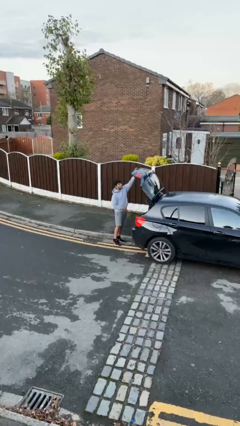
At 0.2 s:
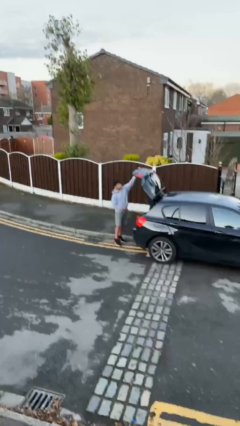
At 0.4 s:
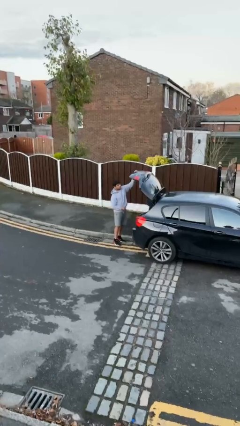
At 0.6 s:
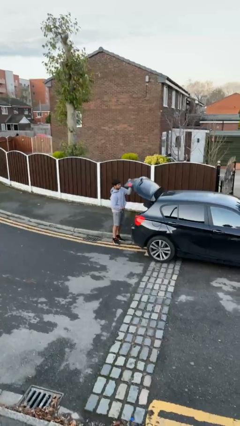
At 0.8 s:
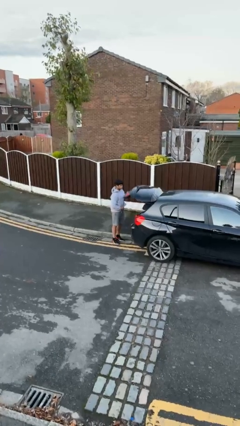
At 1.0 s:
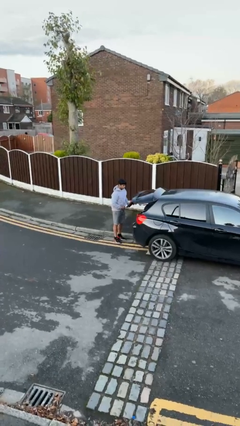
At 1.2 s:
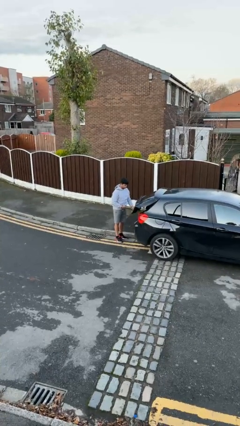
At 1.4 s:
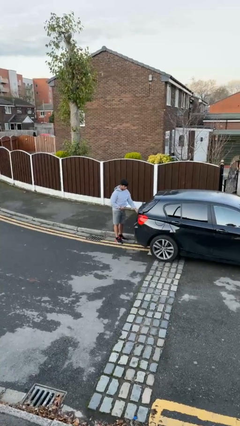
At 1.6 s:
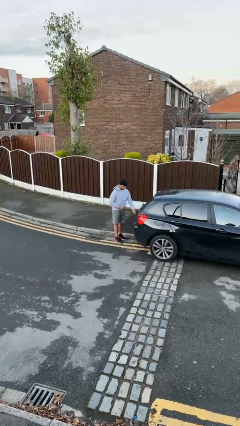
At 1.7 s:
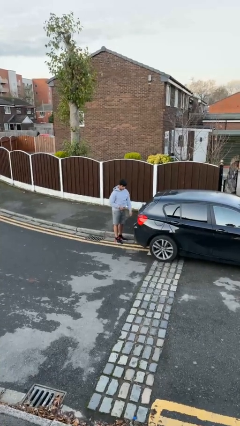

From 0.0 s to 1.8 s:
person closes car trunk

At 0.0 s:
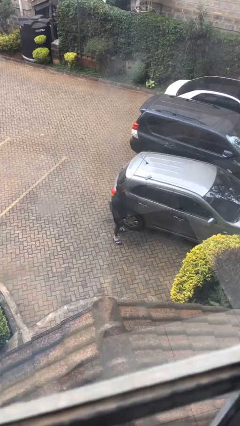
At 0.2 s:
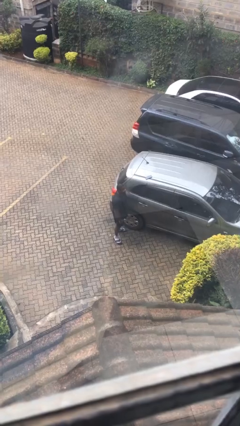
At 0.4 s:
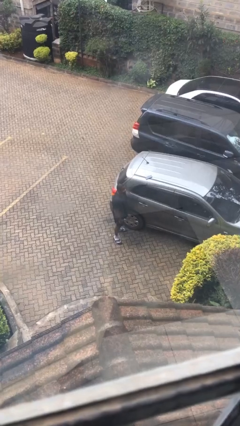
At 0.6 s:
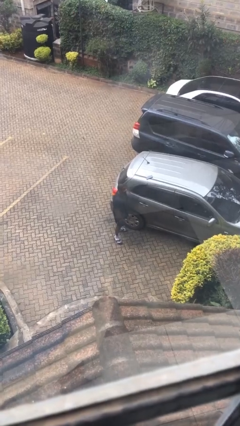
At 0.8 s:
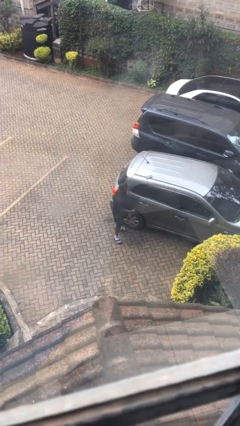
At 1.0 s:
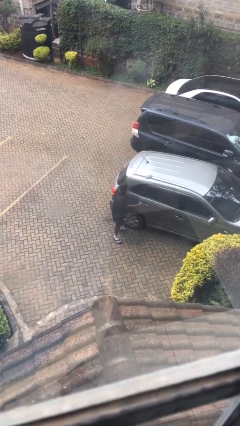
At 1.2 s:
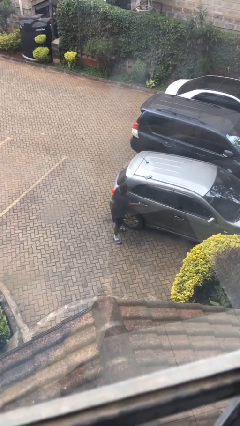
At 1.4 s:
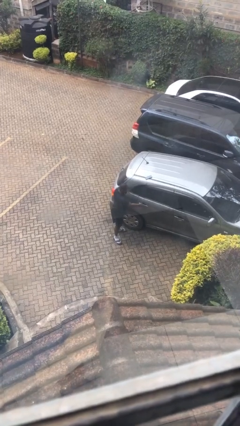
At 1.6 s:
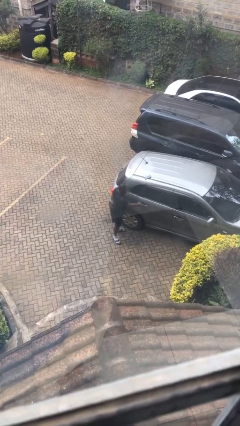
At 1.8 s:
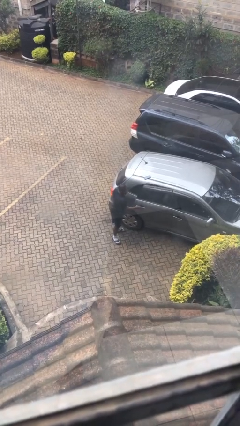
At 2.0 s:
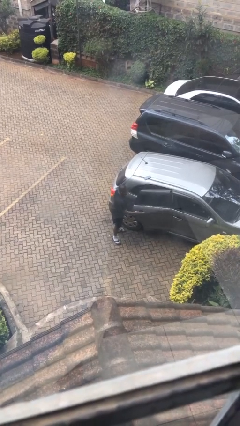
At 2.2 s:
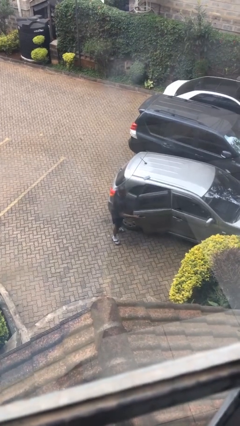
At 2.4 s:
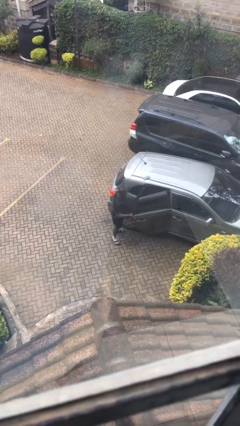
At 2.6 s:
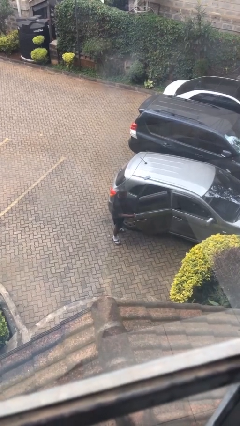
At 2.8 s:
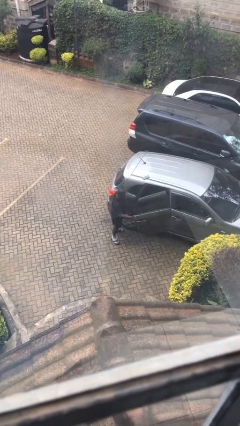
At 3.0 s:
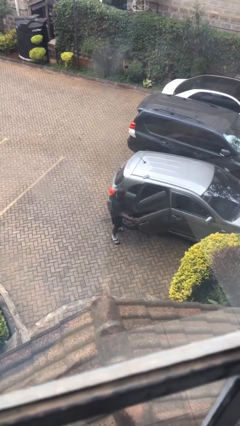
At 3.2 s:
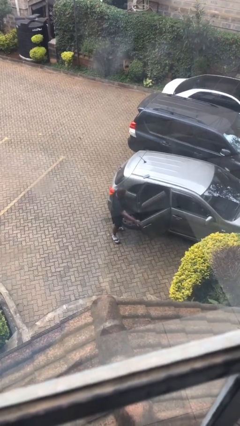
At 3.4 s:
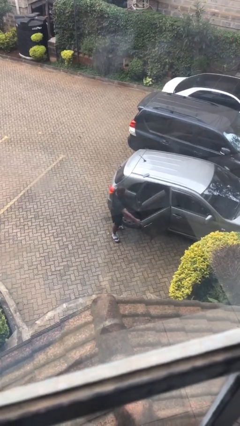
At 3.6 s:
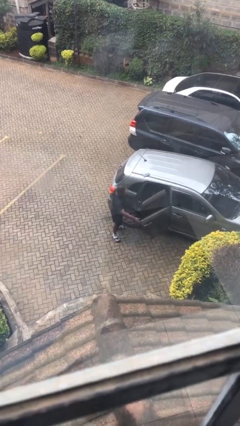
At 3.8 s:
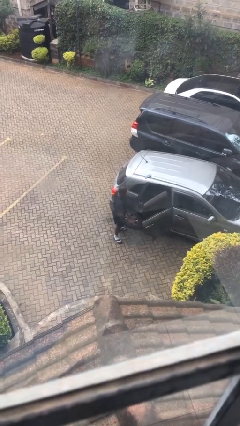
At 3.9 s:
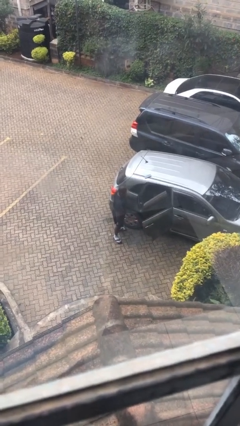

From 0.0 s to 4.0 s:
person opens car door

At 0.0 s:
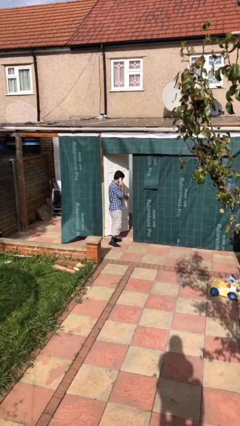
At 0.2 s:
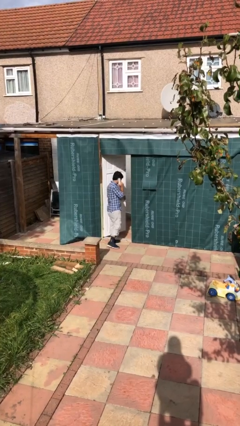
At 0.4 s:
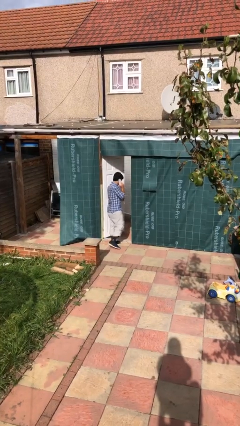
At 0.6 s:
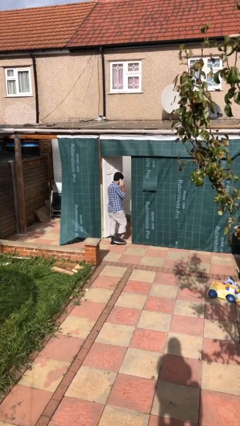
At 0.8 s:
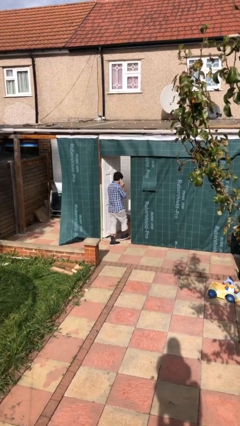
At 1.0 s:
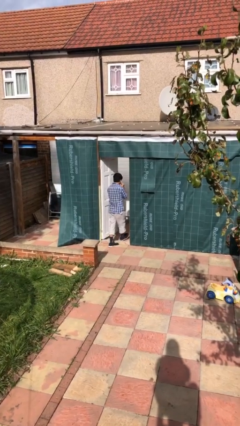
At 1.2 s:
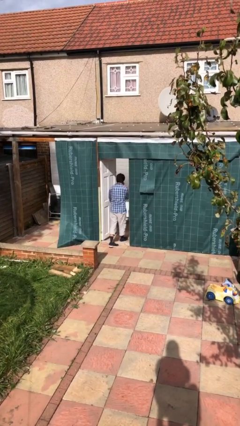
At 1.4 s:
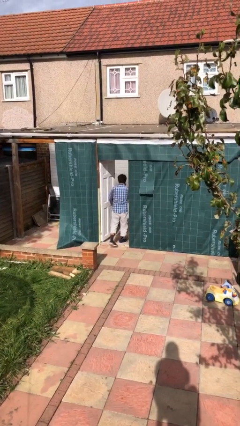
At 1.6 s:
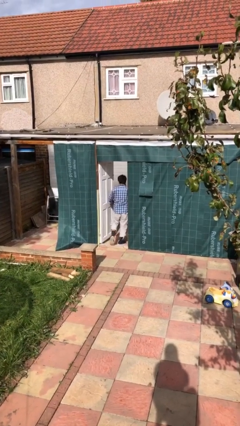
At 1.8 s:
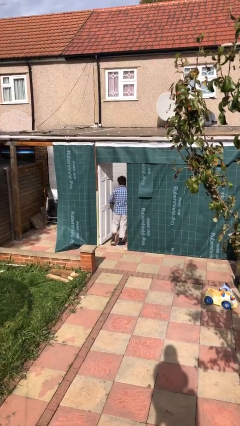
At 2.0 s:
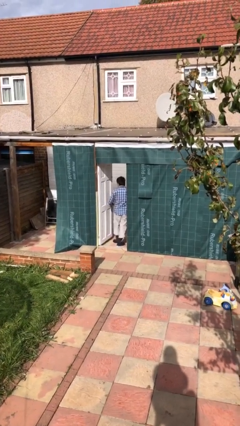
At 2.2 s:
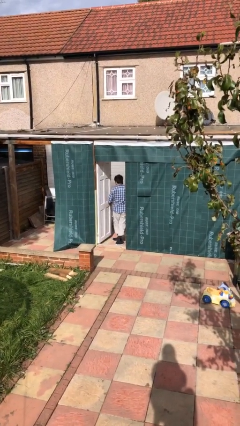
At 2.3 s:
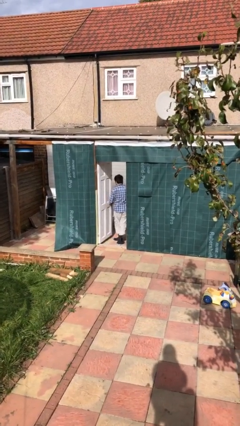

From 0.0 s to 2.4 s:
person exits scene through structure

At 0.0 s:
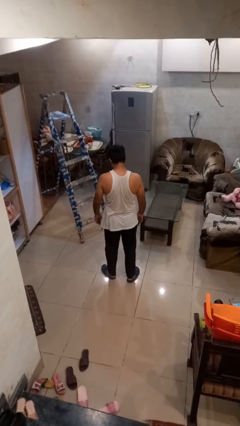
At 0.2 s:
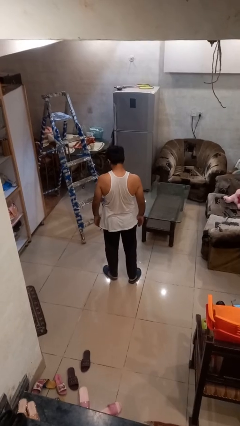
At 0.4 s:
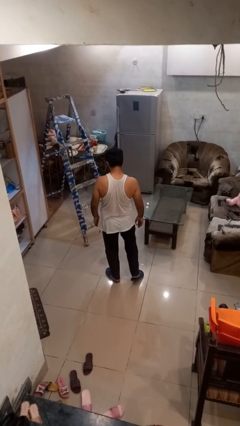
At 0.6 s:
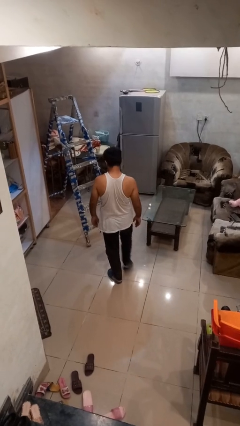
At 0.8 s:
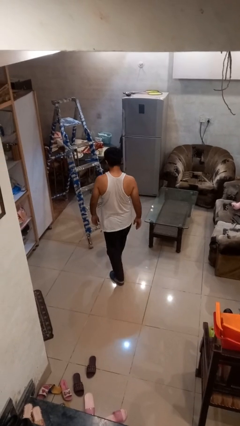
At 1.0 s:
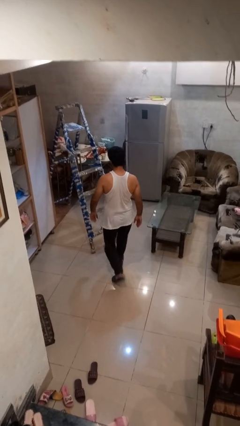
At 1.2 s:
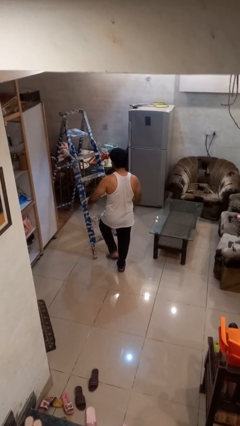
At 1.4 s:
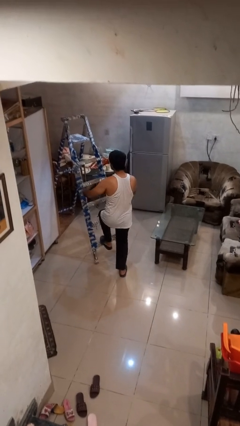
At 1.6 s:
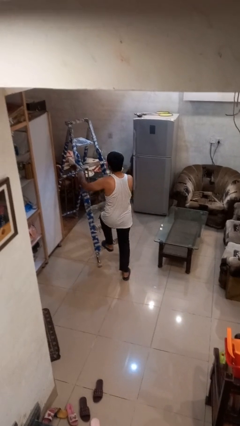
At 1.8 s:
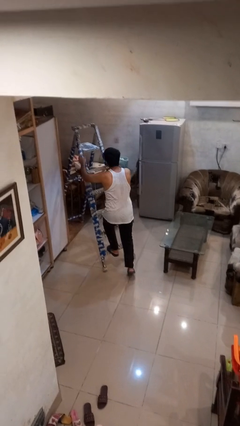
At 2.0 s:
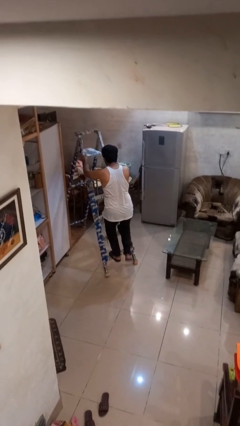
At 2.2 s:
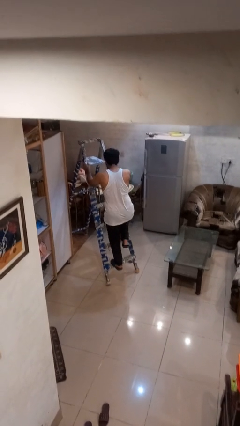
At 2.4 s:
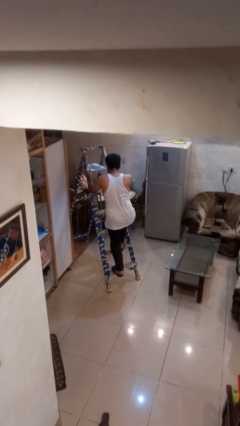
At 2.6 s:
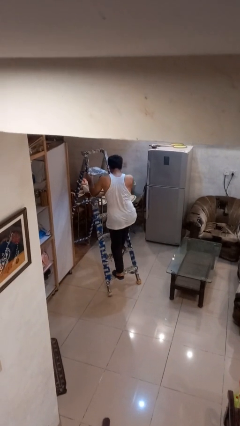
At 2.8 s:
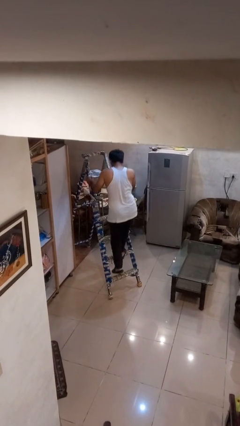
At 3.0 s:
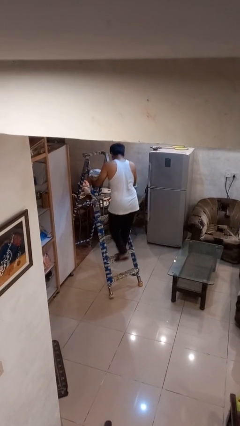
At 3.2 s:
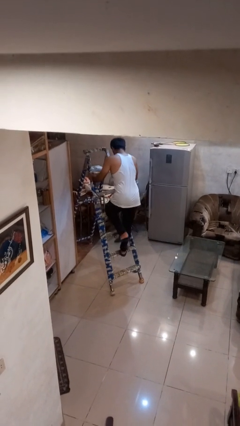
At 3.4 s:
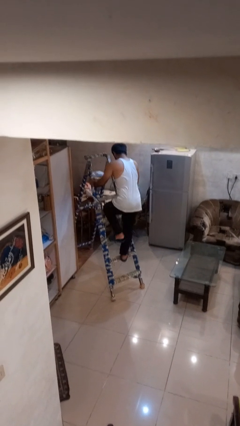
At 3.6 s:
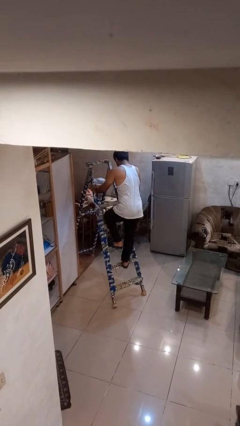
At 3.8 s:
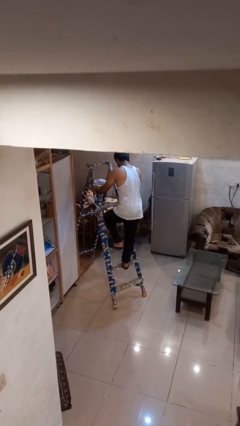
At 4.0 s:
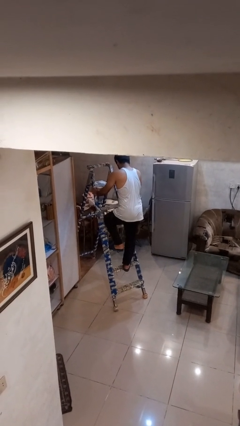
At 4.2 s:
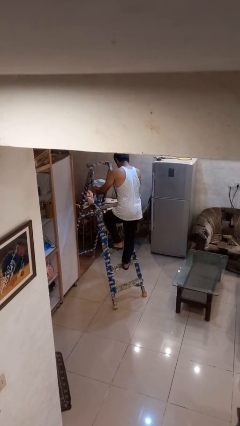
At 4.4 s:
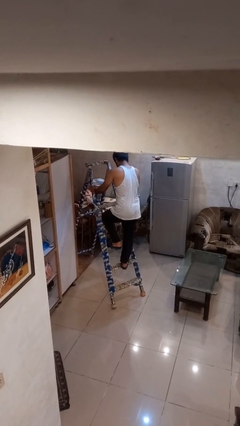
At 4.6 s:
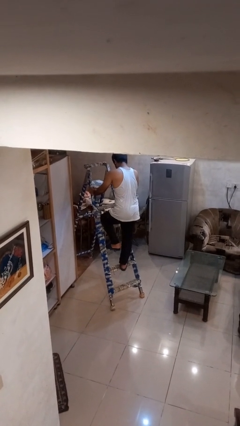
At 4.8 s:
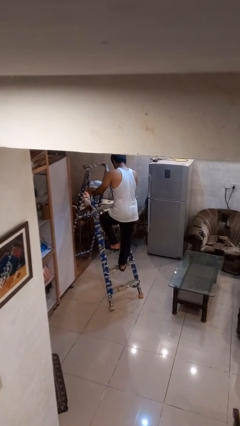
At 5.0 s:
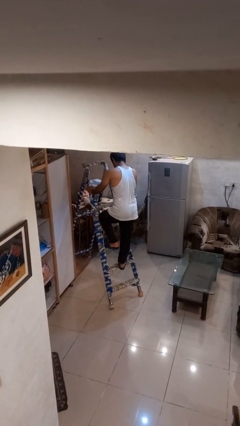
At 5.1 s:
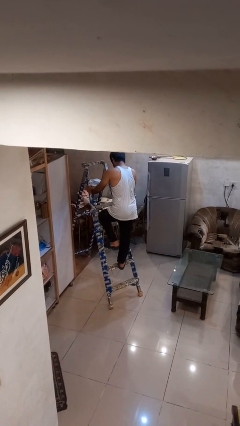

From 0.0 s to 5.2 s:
person climbs up ladder

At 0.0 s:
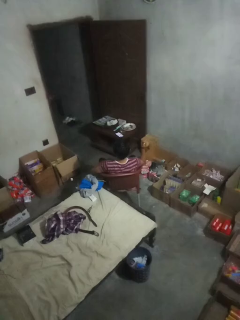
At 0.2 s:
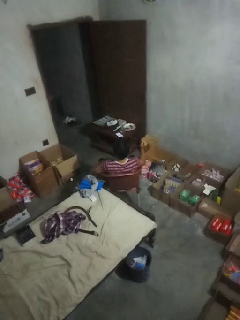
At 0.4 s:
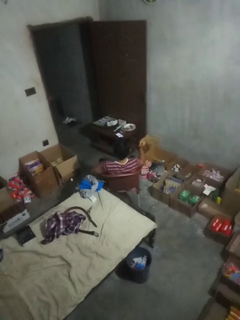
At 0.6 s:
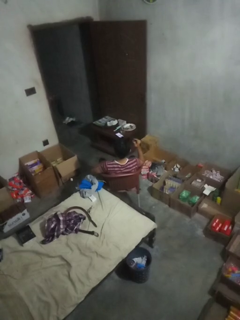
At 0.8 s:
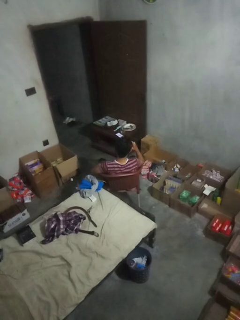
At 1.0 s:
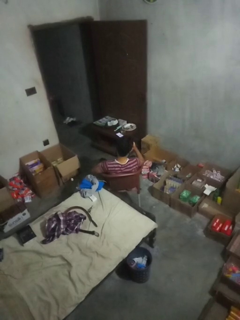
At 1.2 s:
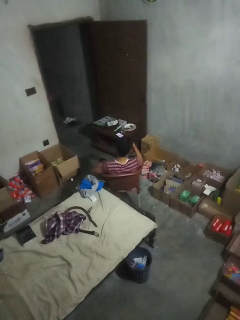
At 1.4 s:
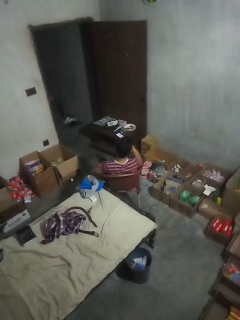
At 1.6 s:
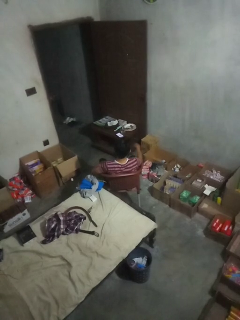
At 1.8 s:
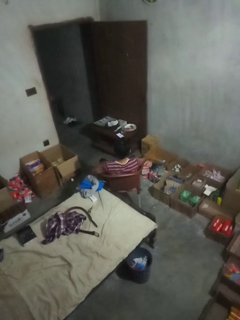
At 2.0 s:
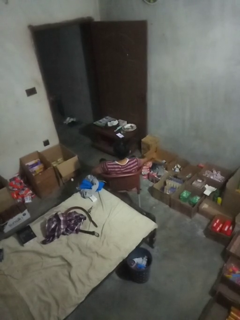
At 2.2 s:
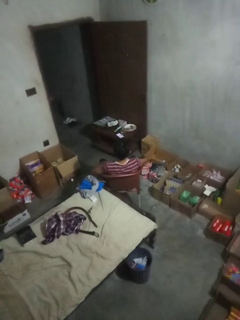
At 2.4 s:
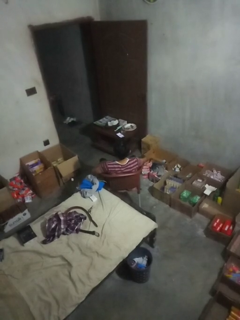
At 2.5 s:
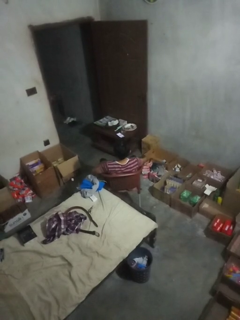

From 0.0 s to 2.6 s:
person takes off sunglasses
